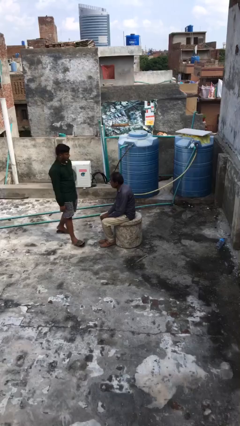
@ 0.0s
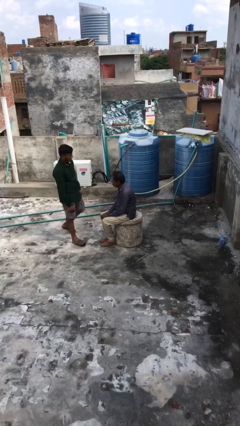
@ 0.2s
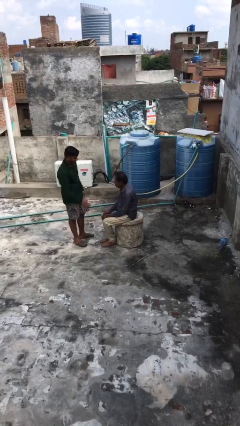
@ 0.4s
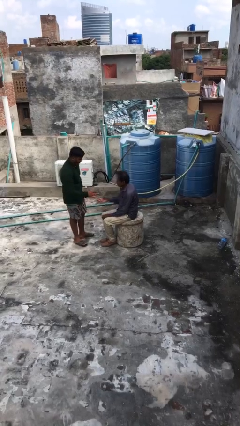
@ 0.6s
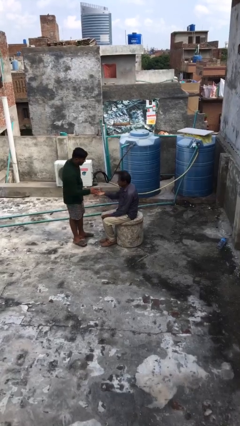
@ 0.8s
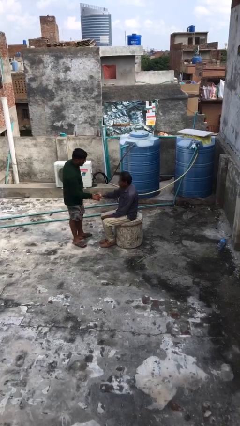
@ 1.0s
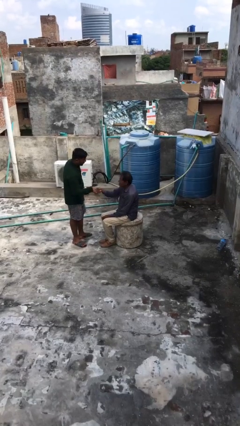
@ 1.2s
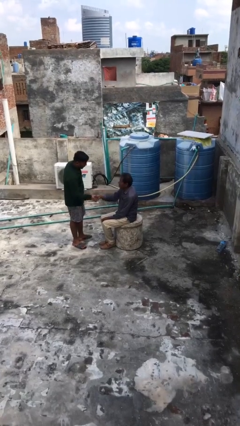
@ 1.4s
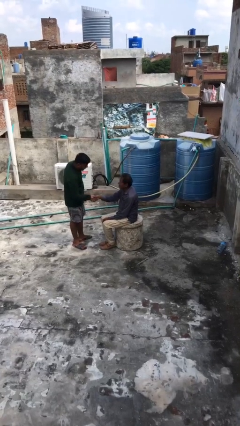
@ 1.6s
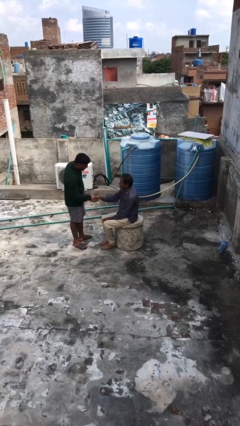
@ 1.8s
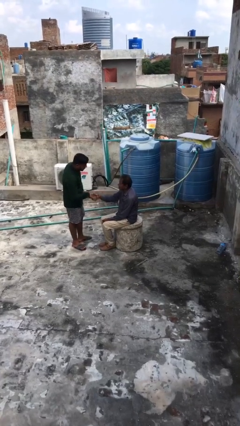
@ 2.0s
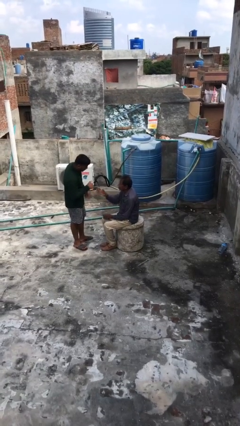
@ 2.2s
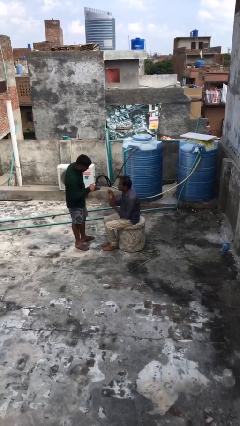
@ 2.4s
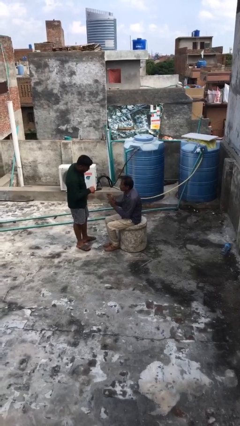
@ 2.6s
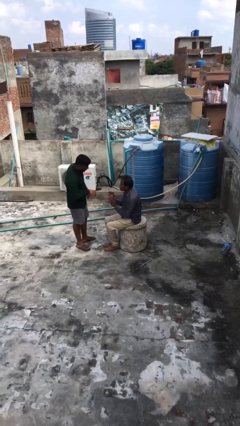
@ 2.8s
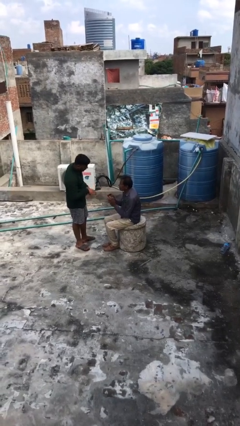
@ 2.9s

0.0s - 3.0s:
person shakes hand

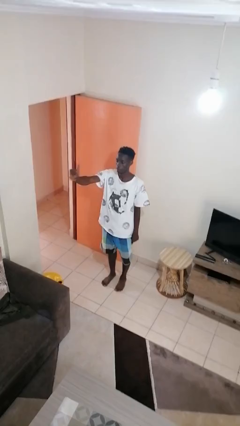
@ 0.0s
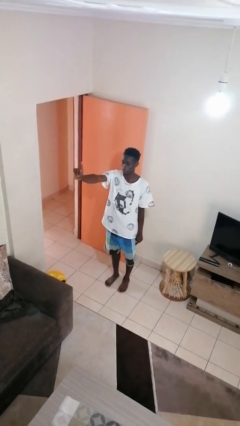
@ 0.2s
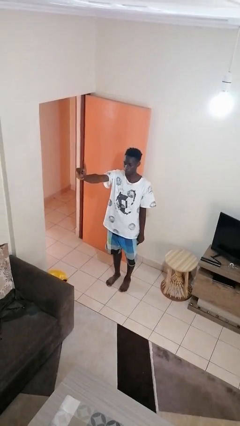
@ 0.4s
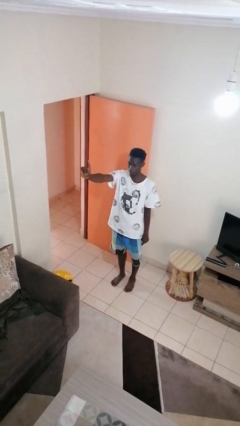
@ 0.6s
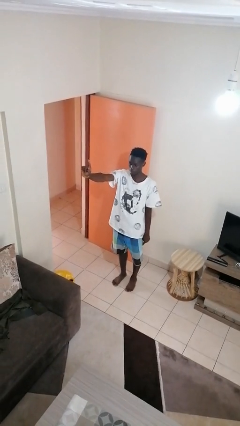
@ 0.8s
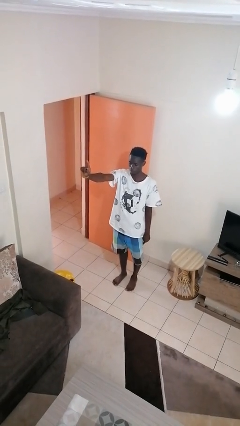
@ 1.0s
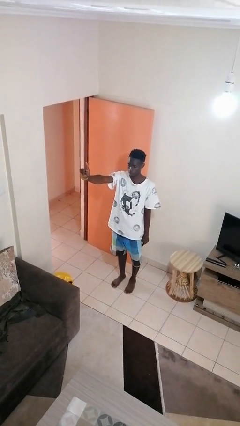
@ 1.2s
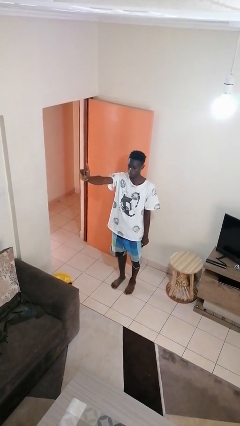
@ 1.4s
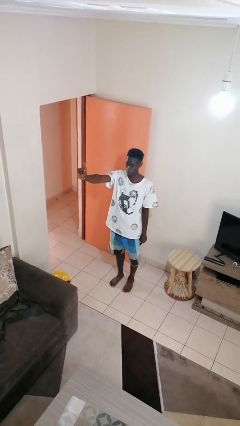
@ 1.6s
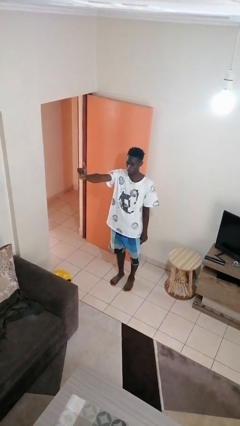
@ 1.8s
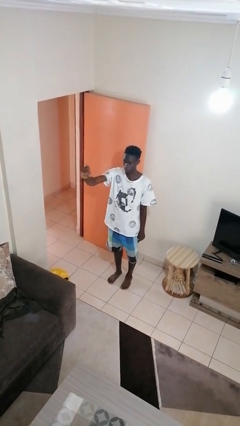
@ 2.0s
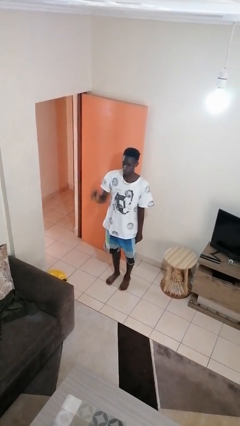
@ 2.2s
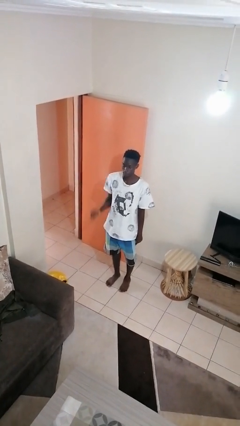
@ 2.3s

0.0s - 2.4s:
person gestures number one

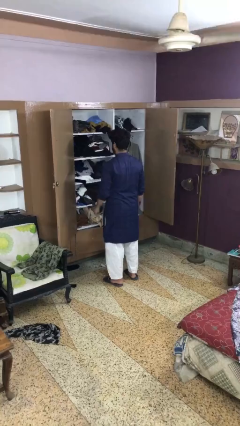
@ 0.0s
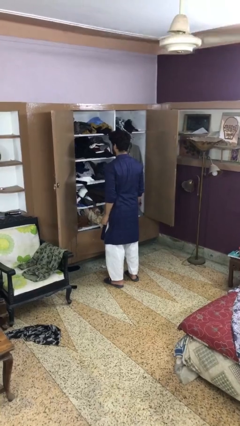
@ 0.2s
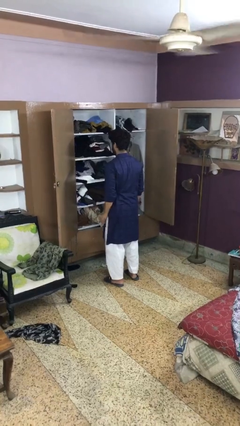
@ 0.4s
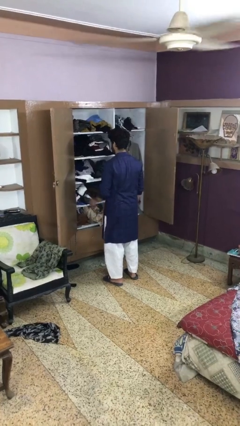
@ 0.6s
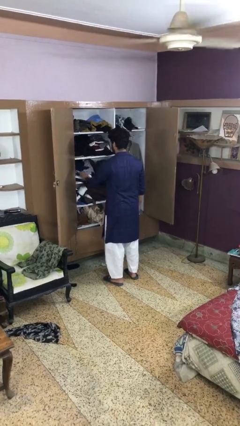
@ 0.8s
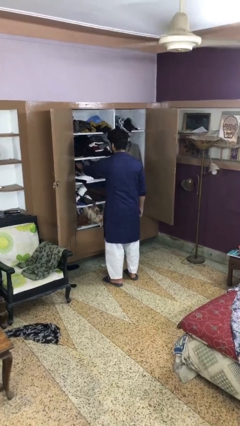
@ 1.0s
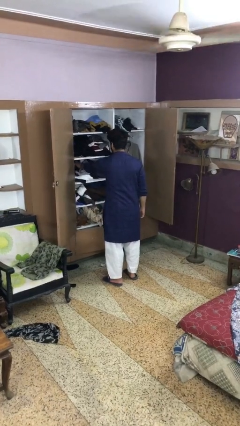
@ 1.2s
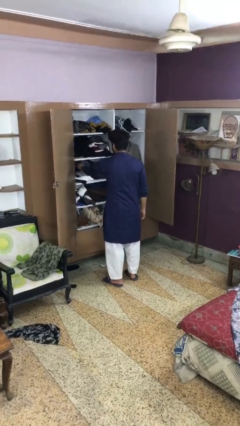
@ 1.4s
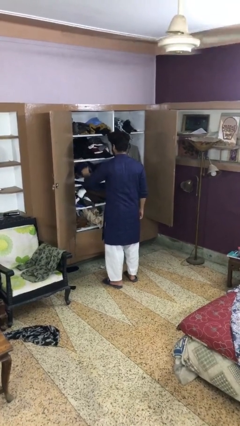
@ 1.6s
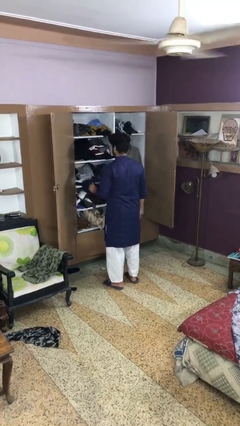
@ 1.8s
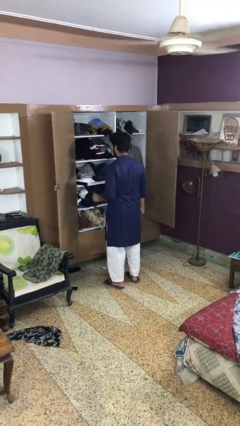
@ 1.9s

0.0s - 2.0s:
person takes clothes from dresser

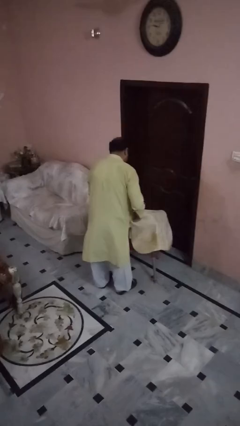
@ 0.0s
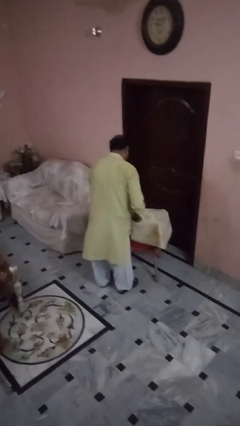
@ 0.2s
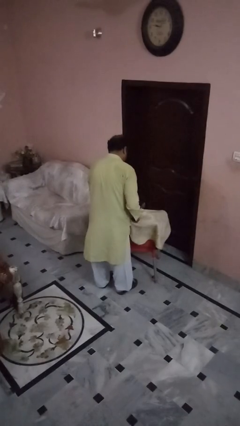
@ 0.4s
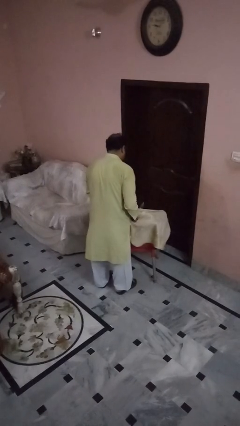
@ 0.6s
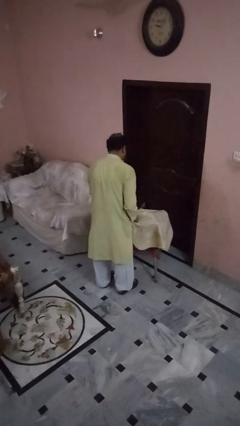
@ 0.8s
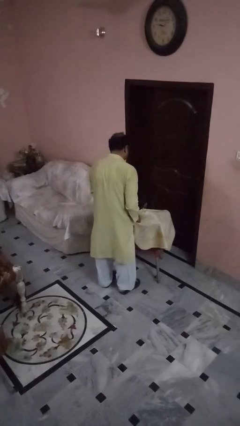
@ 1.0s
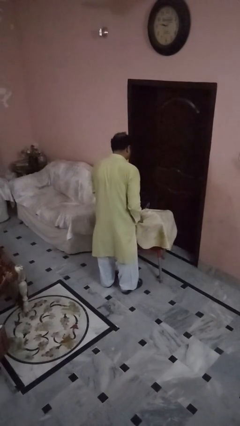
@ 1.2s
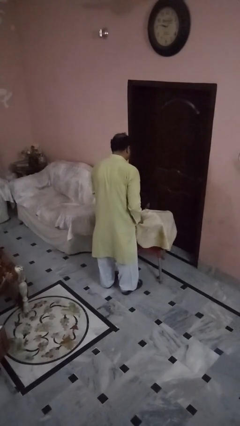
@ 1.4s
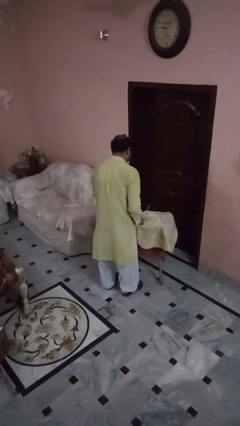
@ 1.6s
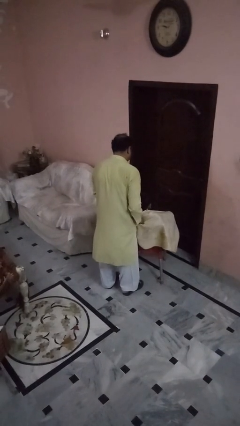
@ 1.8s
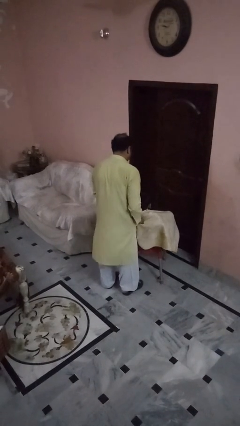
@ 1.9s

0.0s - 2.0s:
person covers friend with blanket

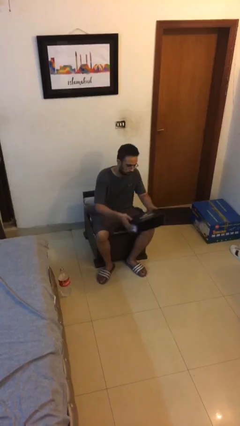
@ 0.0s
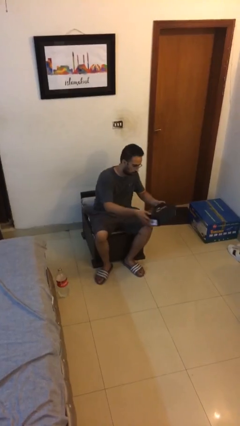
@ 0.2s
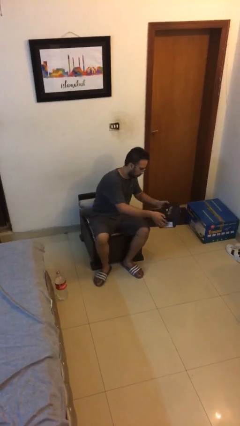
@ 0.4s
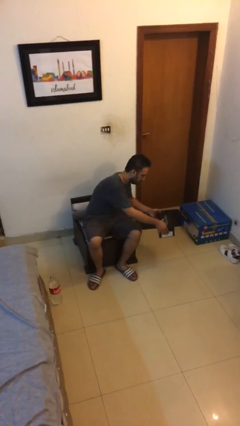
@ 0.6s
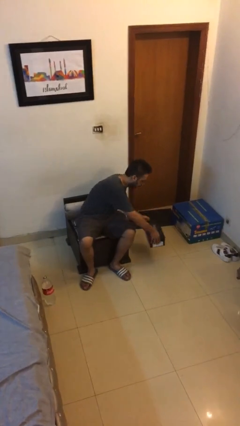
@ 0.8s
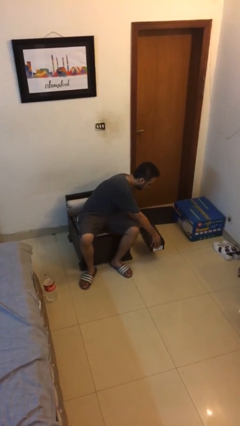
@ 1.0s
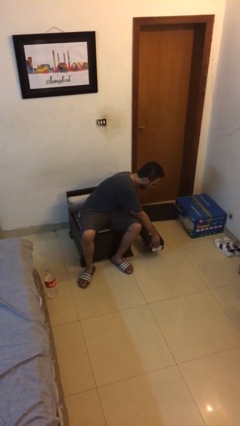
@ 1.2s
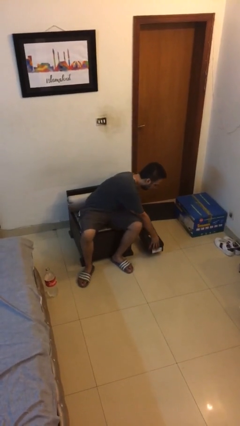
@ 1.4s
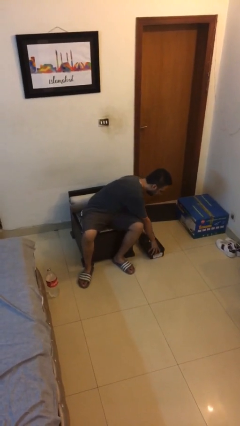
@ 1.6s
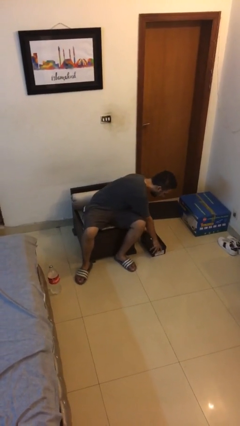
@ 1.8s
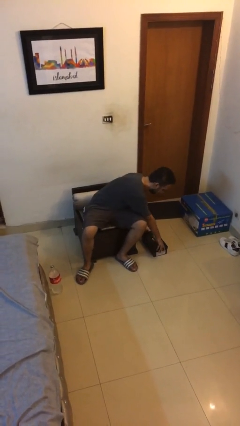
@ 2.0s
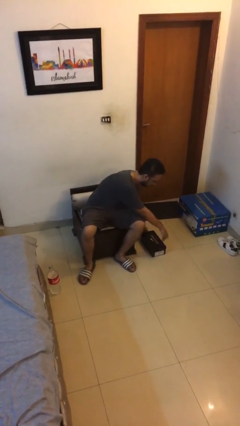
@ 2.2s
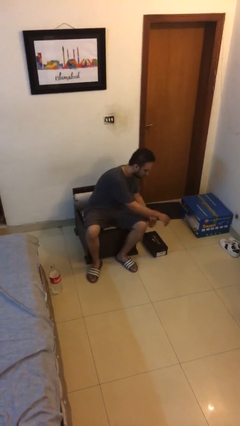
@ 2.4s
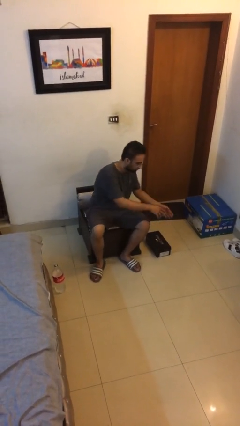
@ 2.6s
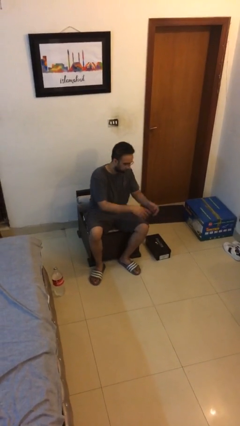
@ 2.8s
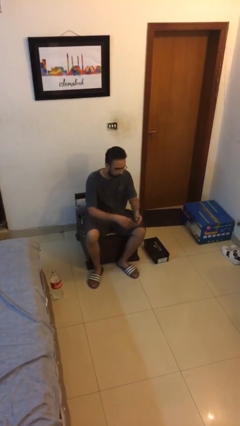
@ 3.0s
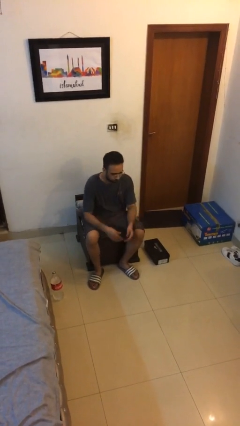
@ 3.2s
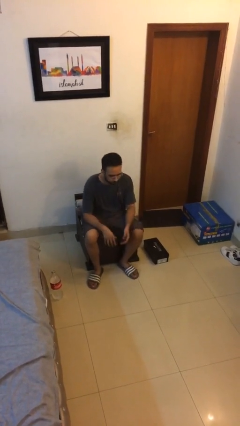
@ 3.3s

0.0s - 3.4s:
person puts down object on floor

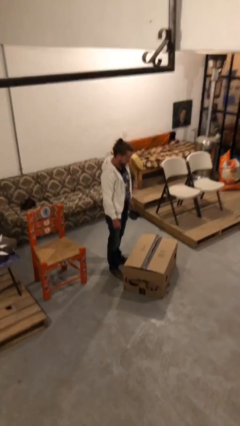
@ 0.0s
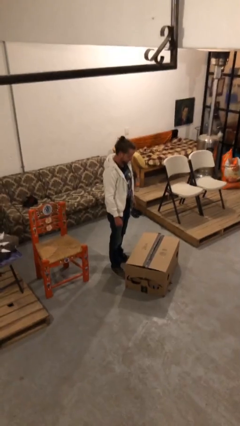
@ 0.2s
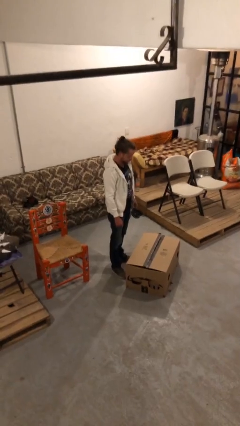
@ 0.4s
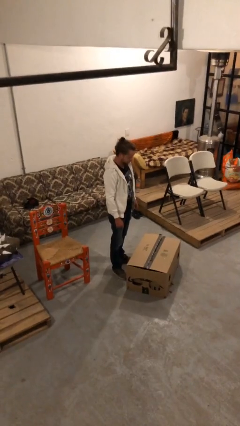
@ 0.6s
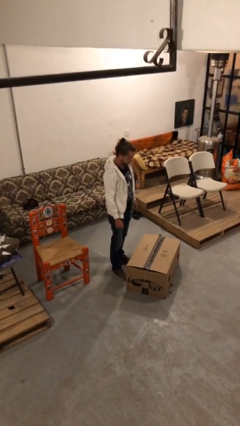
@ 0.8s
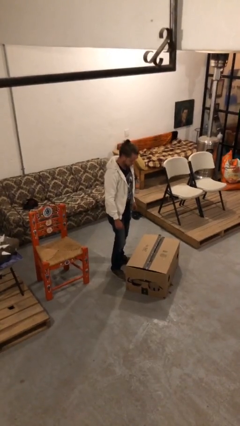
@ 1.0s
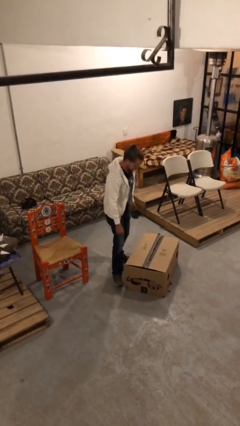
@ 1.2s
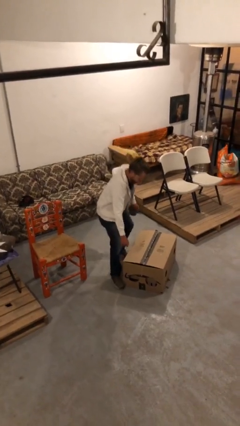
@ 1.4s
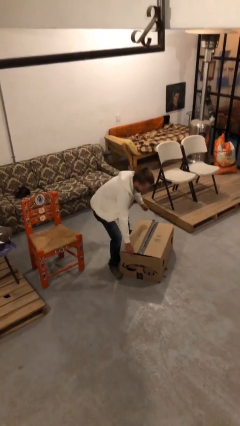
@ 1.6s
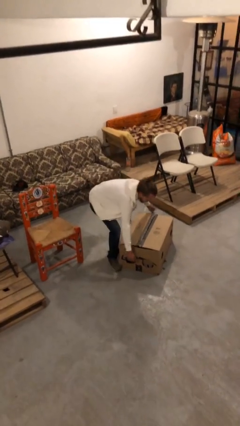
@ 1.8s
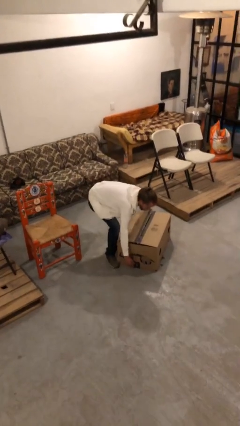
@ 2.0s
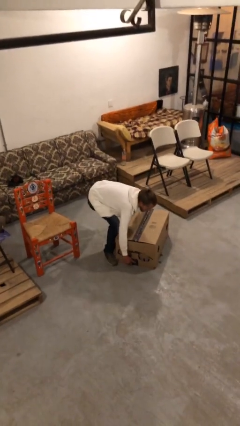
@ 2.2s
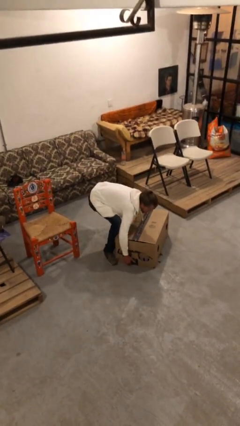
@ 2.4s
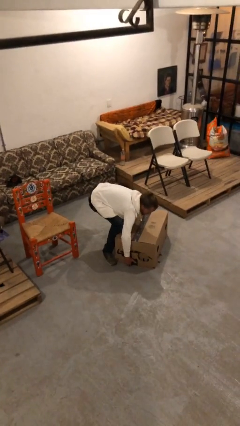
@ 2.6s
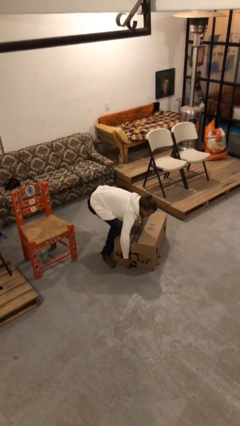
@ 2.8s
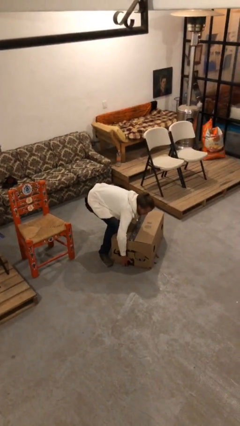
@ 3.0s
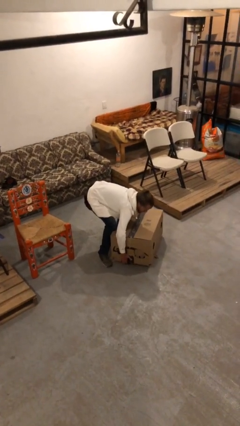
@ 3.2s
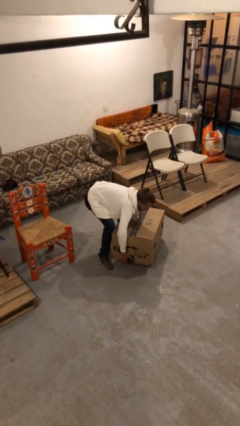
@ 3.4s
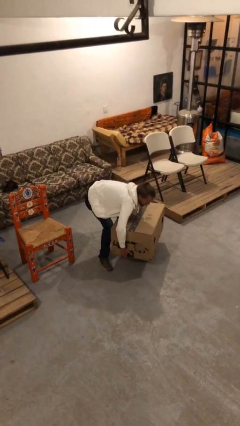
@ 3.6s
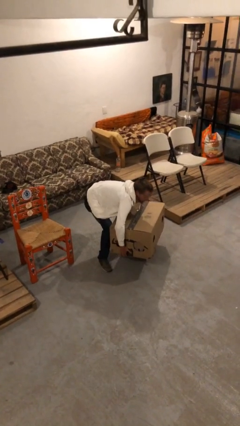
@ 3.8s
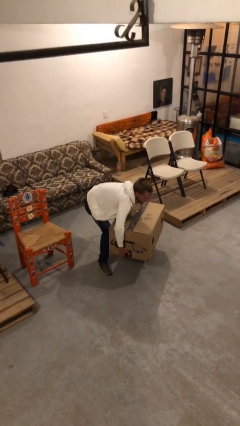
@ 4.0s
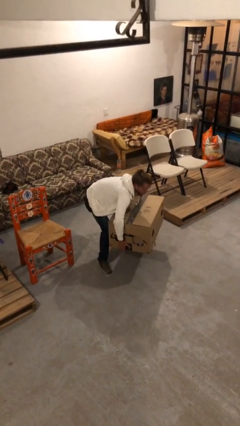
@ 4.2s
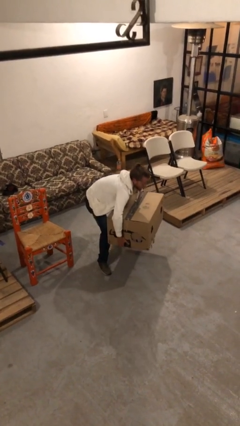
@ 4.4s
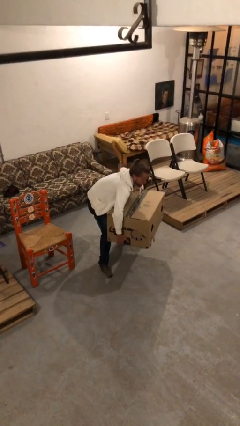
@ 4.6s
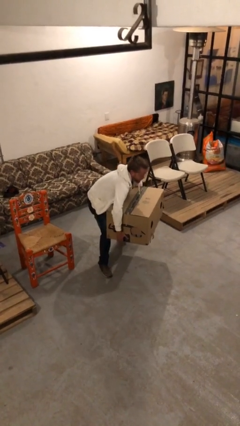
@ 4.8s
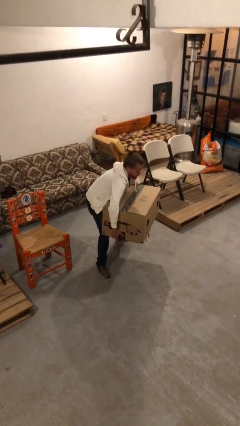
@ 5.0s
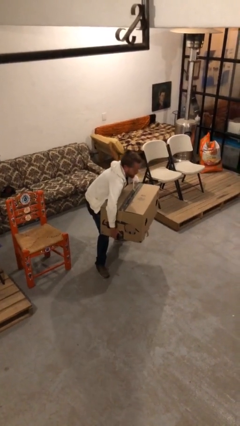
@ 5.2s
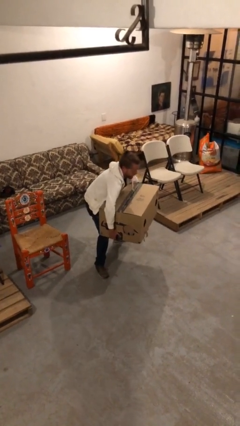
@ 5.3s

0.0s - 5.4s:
person picks up object from floor
